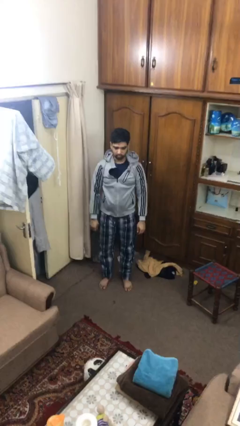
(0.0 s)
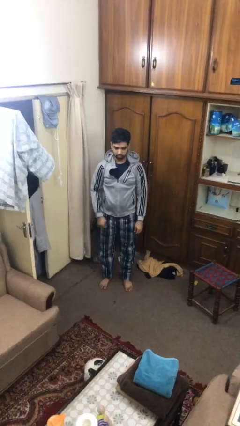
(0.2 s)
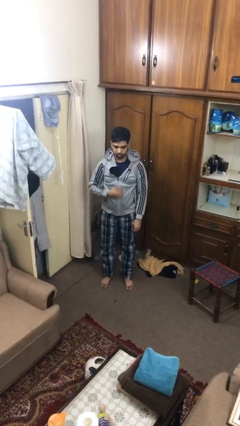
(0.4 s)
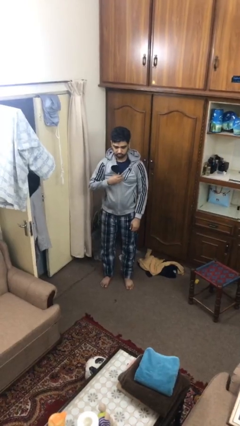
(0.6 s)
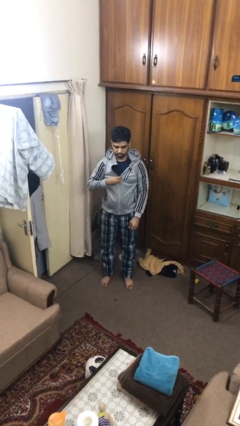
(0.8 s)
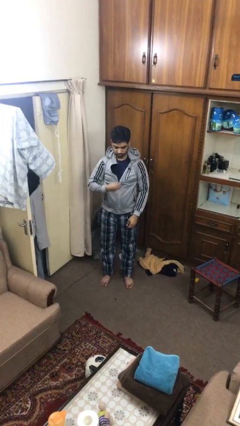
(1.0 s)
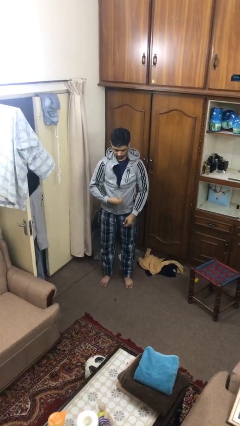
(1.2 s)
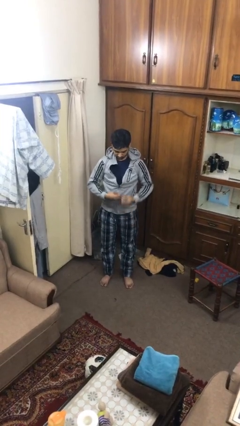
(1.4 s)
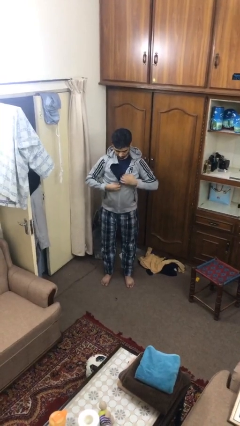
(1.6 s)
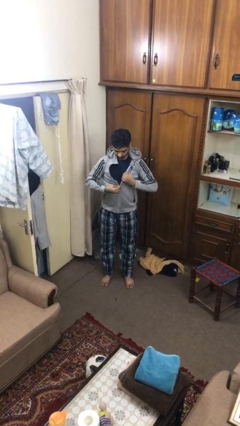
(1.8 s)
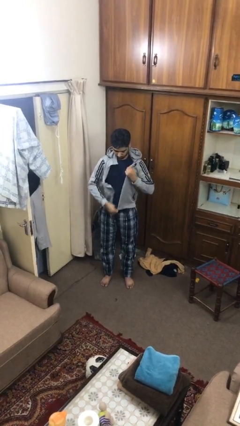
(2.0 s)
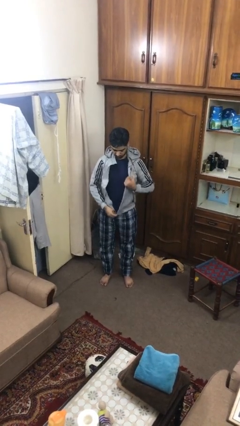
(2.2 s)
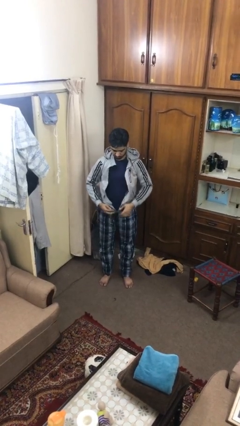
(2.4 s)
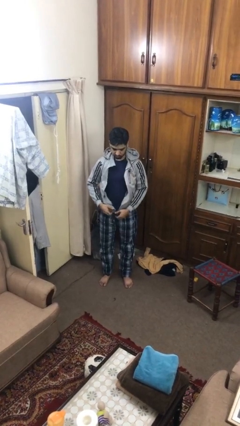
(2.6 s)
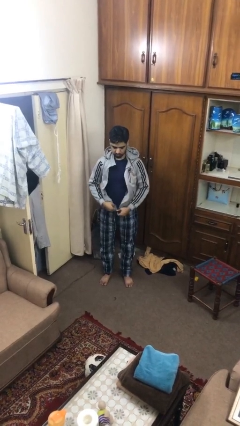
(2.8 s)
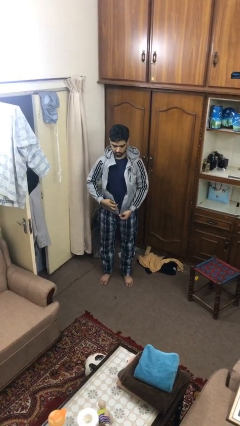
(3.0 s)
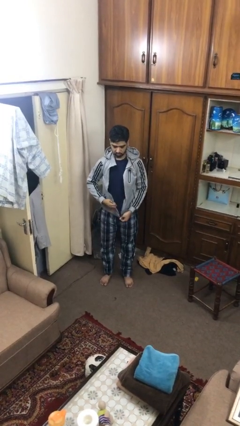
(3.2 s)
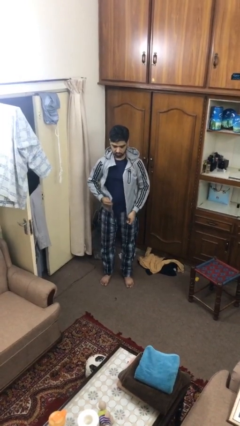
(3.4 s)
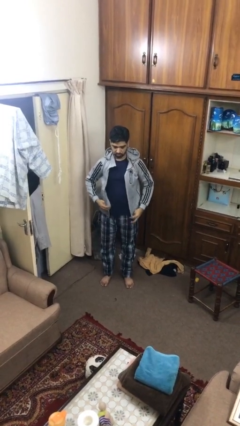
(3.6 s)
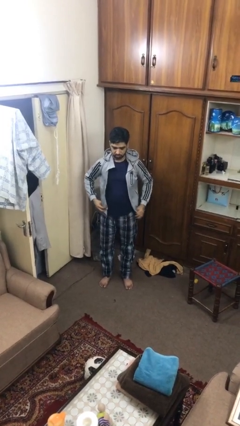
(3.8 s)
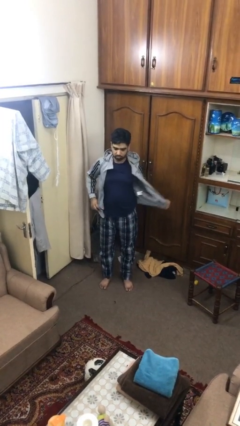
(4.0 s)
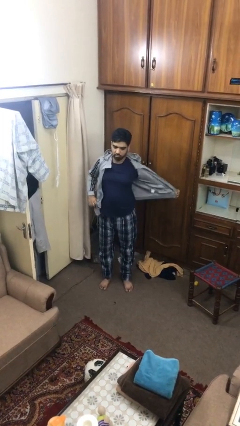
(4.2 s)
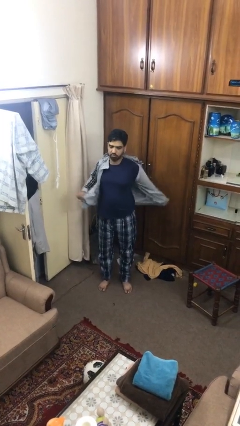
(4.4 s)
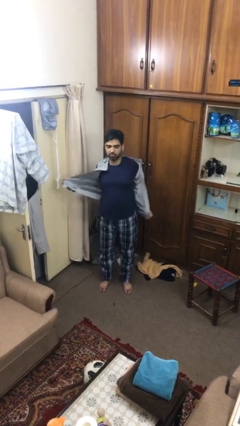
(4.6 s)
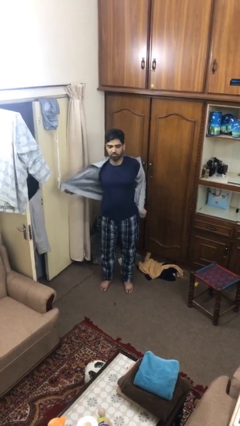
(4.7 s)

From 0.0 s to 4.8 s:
person unzips jacket

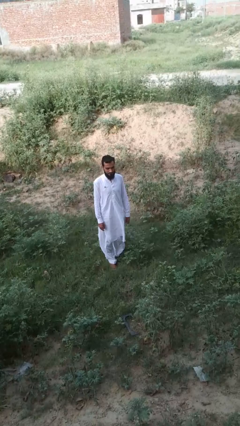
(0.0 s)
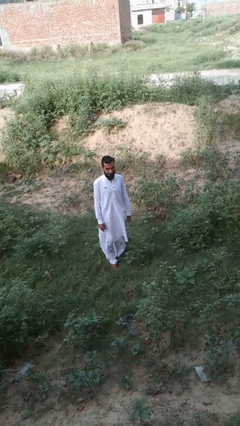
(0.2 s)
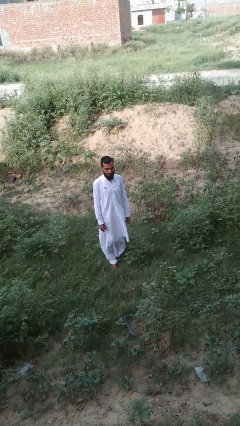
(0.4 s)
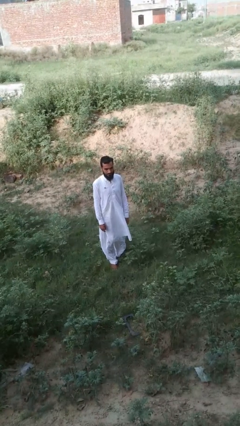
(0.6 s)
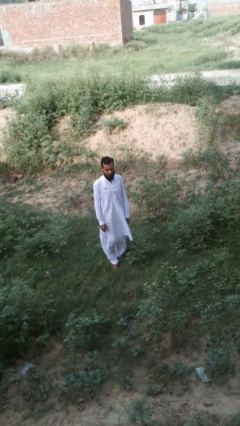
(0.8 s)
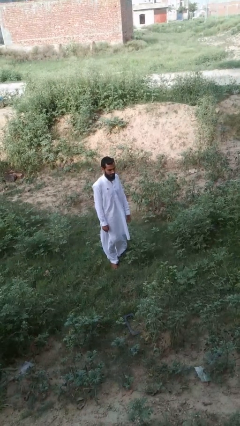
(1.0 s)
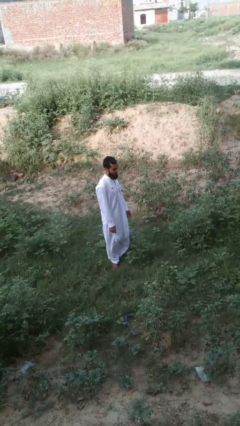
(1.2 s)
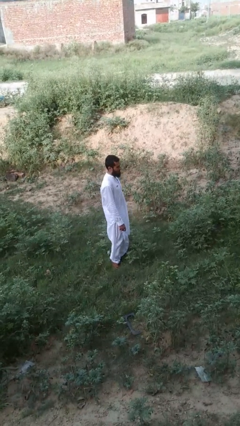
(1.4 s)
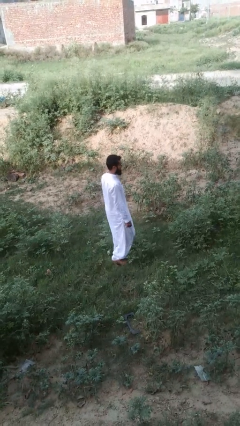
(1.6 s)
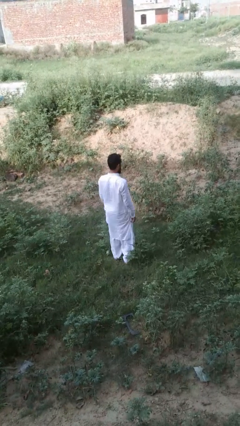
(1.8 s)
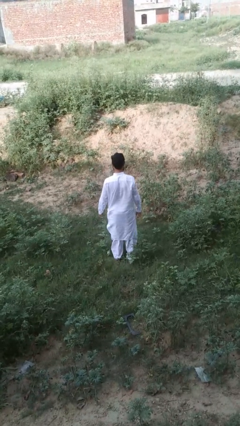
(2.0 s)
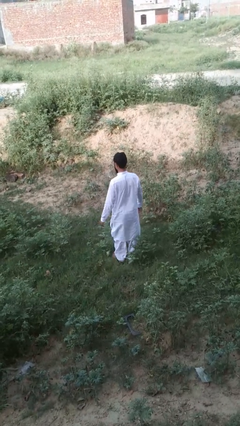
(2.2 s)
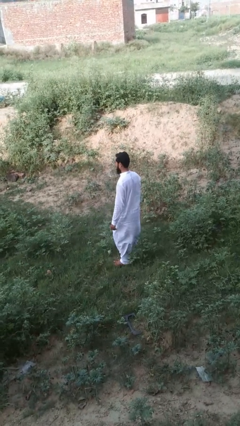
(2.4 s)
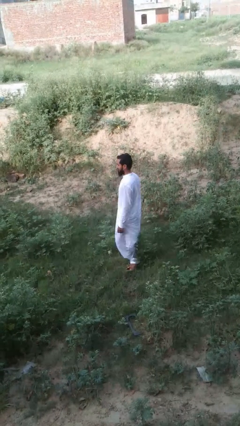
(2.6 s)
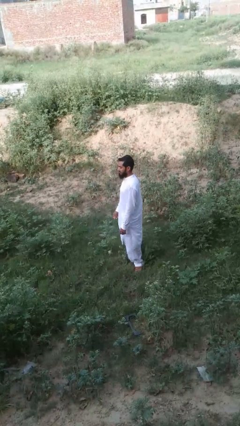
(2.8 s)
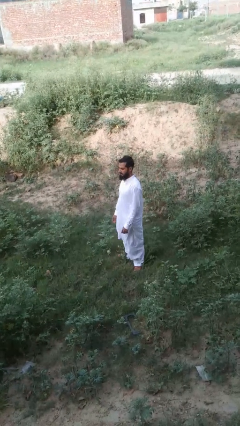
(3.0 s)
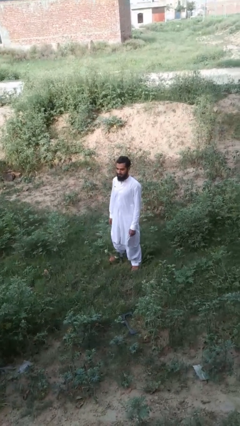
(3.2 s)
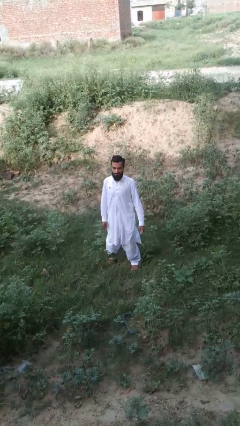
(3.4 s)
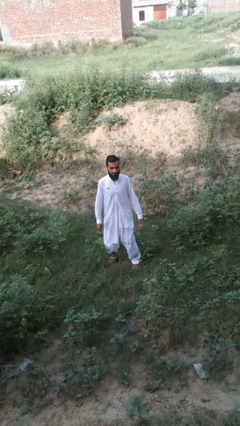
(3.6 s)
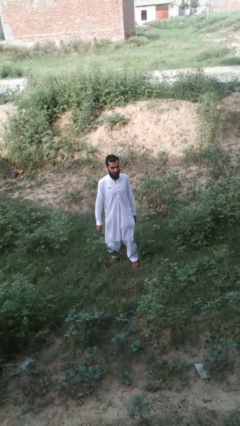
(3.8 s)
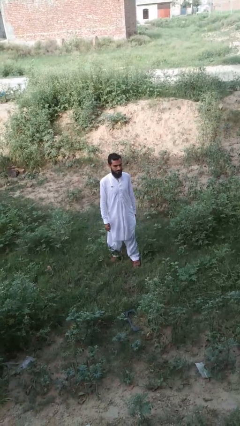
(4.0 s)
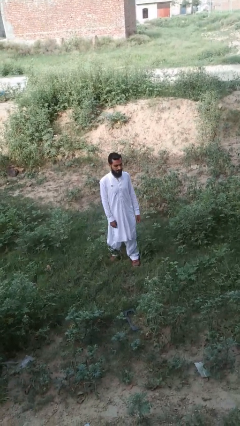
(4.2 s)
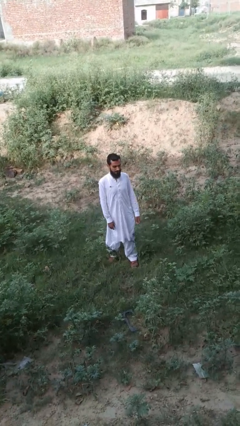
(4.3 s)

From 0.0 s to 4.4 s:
person twirls

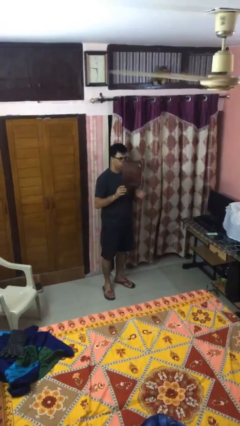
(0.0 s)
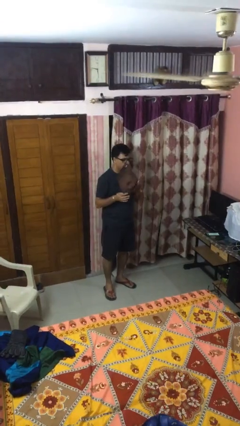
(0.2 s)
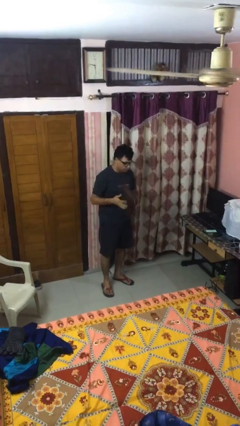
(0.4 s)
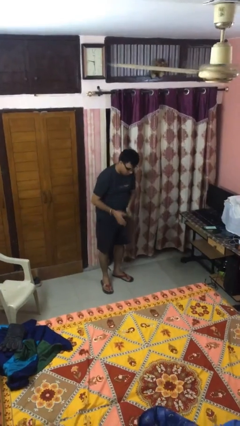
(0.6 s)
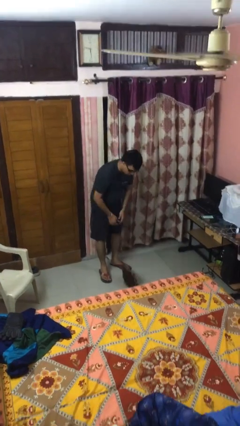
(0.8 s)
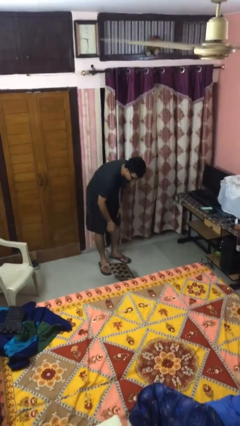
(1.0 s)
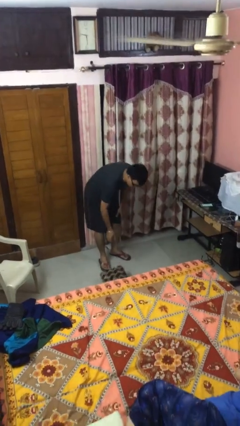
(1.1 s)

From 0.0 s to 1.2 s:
person drops object

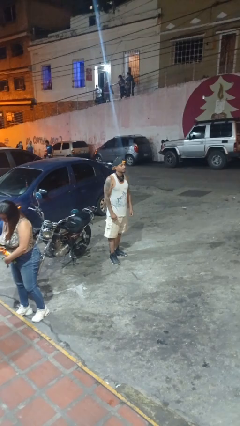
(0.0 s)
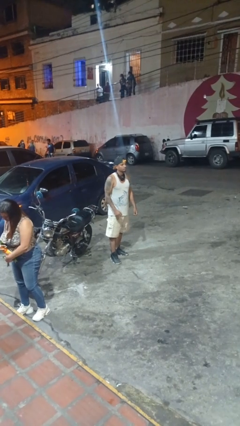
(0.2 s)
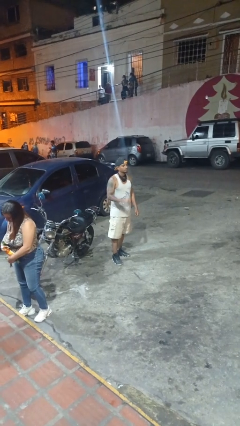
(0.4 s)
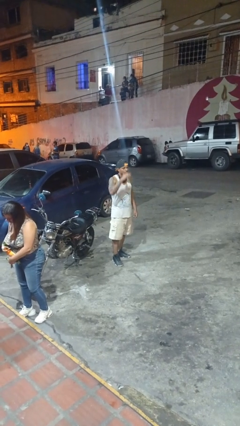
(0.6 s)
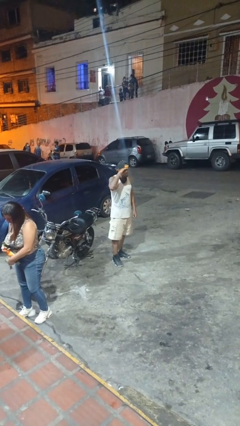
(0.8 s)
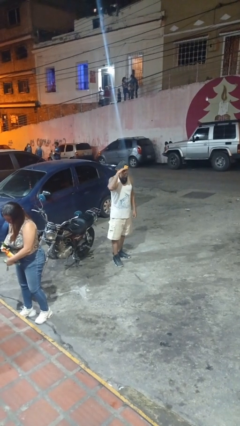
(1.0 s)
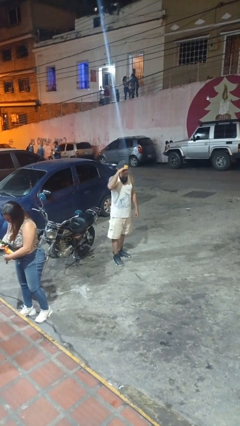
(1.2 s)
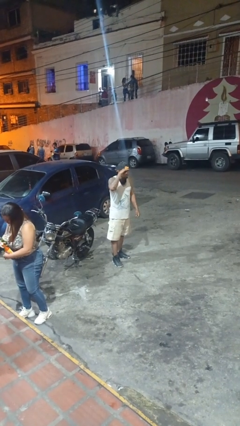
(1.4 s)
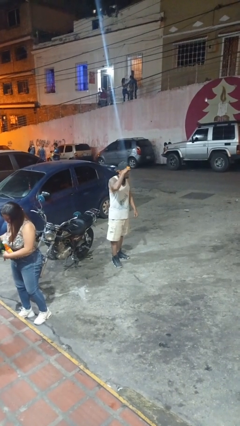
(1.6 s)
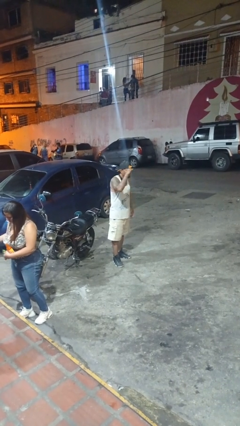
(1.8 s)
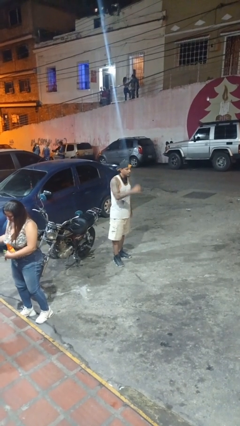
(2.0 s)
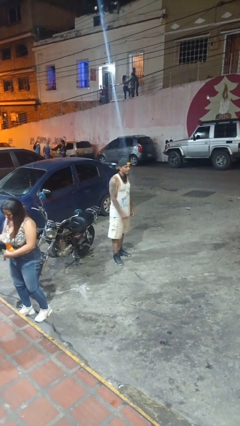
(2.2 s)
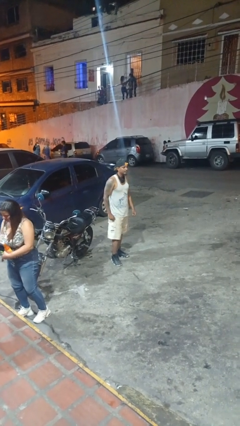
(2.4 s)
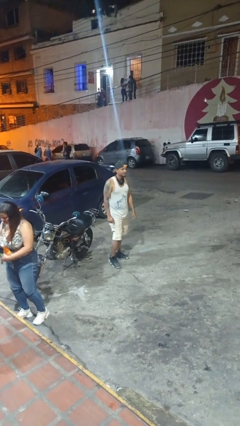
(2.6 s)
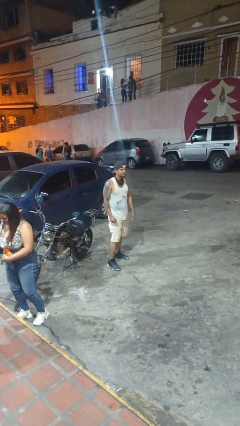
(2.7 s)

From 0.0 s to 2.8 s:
person shades eyes

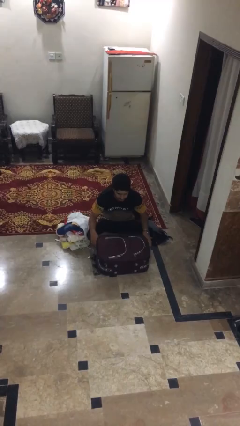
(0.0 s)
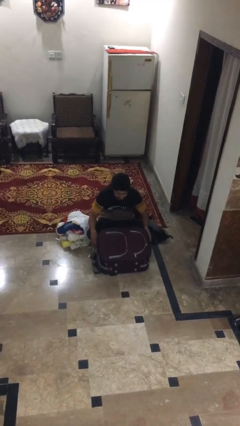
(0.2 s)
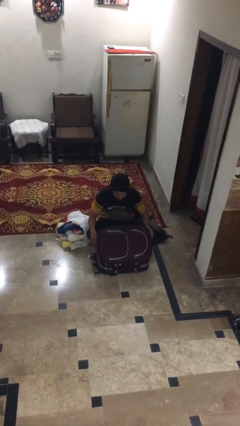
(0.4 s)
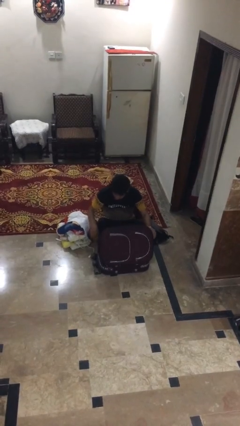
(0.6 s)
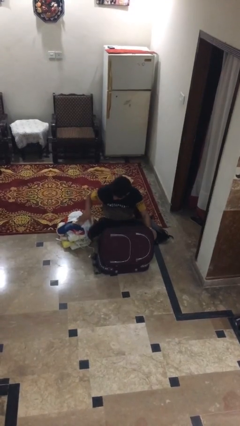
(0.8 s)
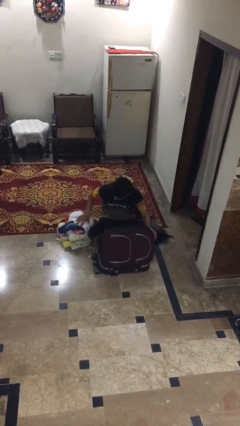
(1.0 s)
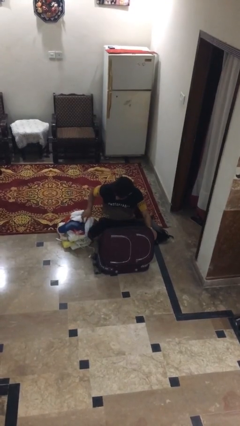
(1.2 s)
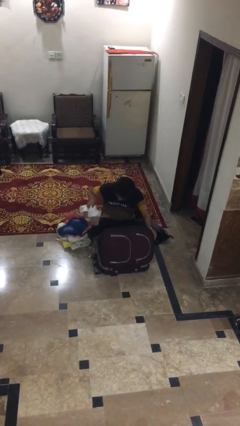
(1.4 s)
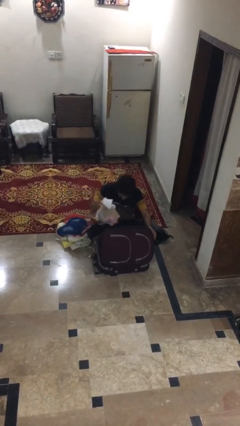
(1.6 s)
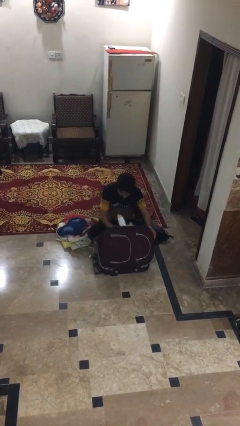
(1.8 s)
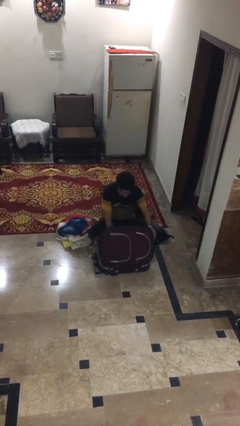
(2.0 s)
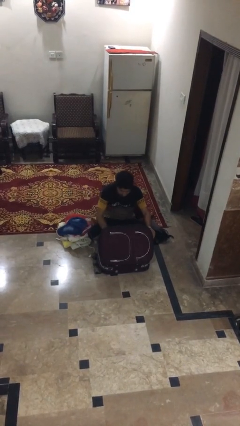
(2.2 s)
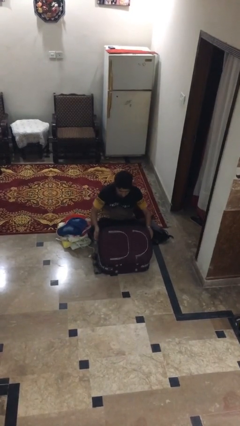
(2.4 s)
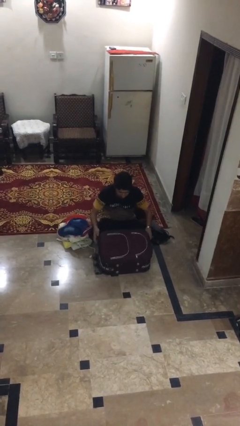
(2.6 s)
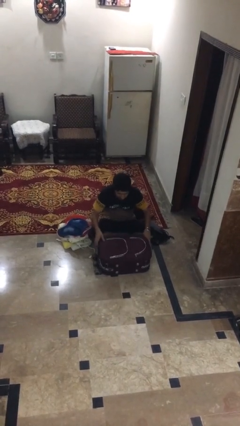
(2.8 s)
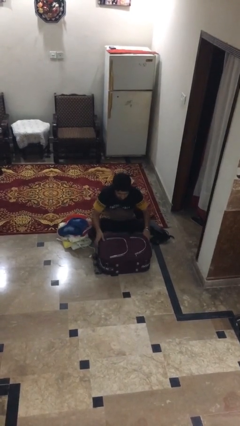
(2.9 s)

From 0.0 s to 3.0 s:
person loads clothes into suitcase

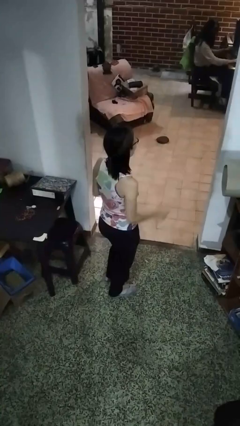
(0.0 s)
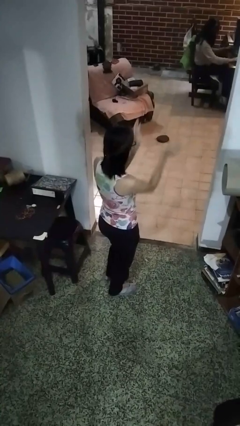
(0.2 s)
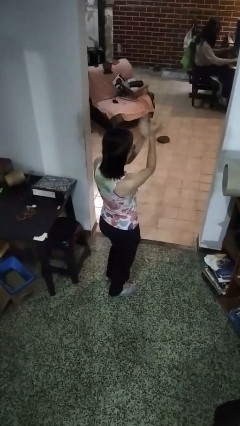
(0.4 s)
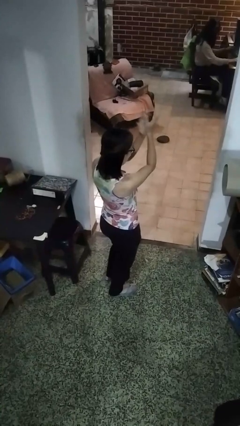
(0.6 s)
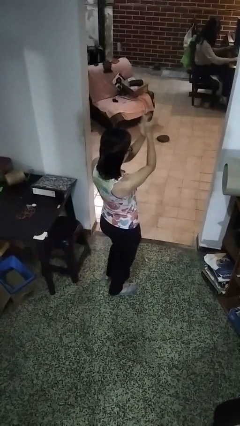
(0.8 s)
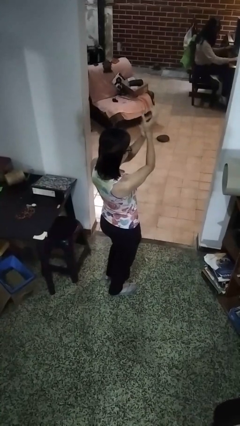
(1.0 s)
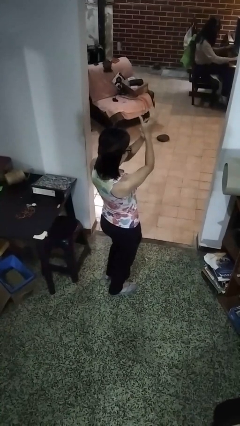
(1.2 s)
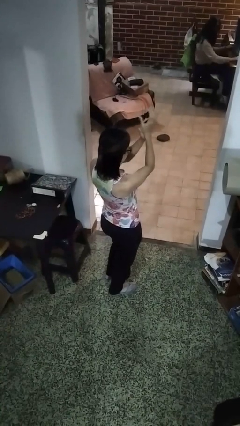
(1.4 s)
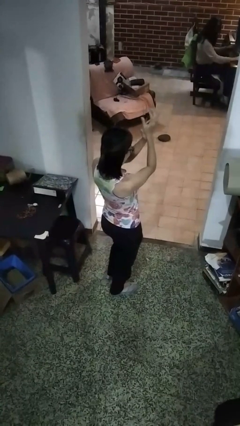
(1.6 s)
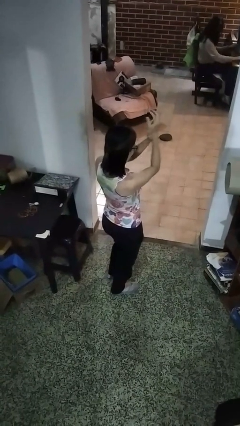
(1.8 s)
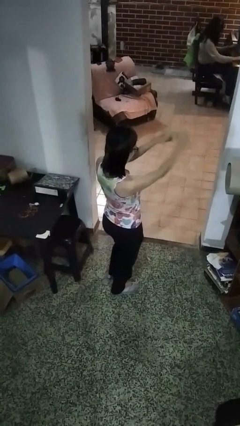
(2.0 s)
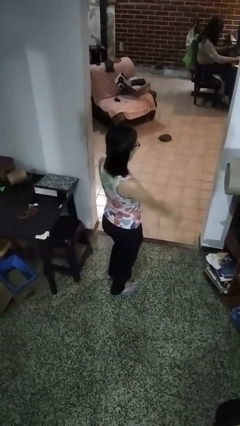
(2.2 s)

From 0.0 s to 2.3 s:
person claps hands
